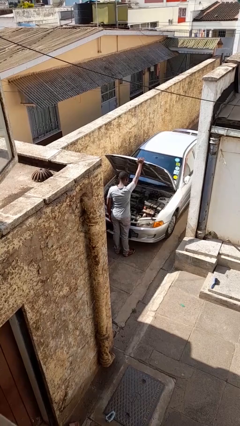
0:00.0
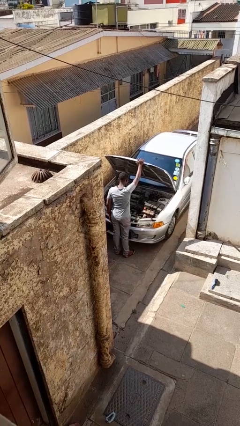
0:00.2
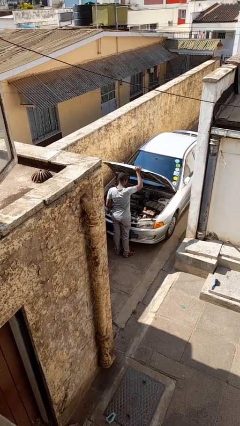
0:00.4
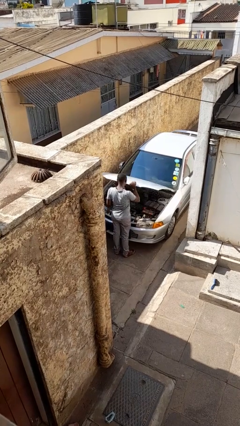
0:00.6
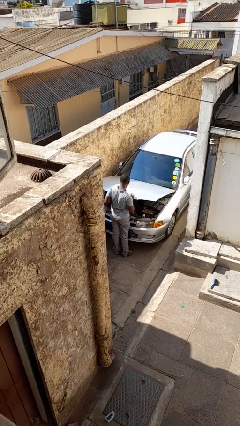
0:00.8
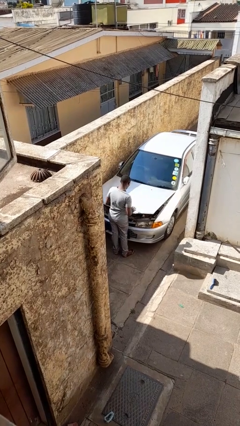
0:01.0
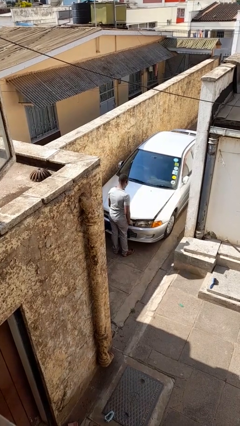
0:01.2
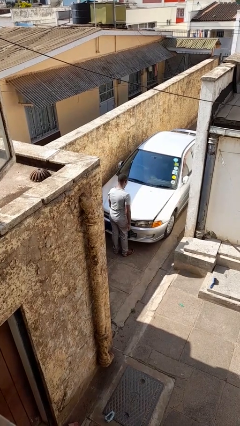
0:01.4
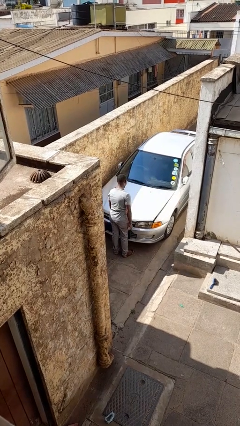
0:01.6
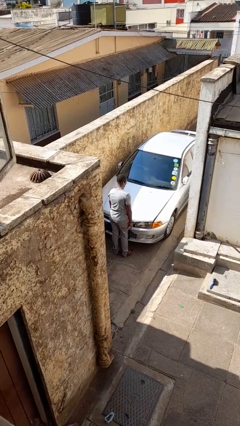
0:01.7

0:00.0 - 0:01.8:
person closes car hood

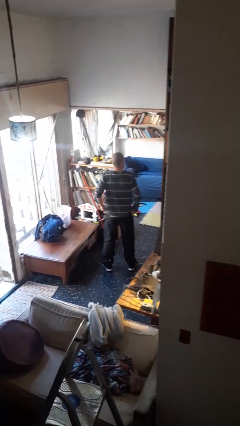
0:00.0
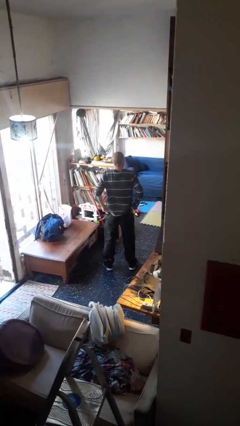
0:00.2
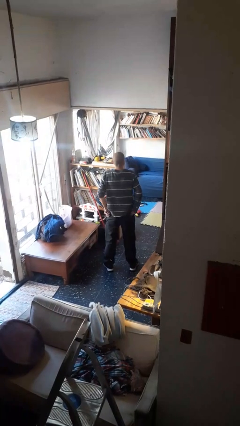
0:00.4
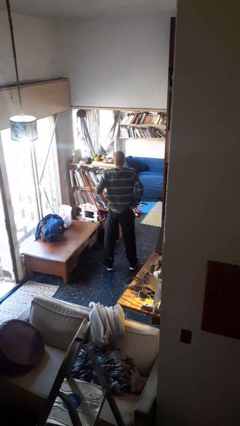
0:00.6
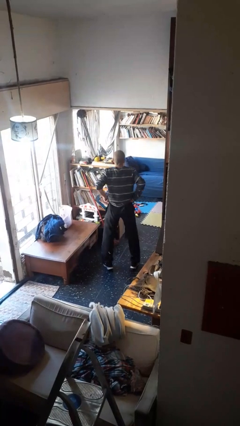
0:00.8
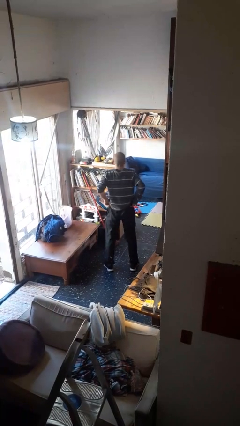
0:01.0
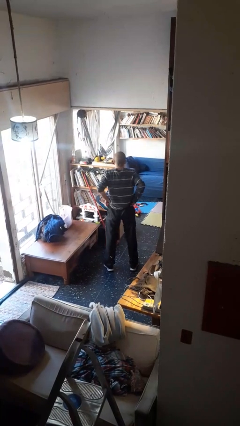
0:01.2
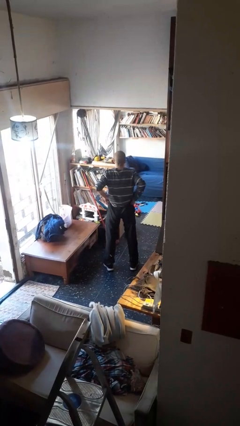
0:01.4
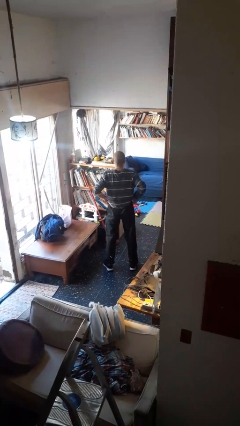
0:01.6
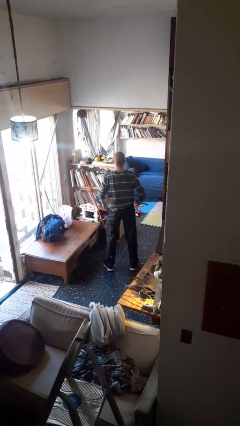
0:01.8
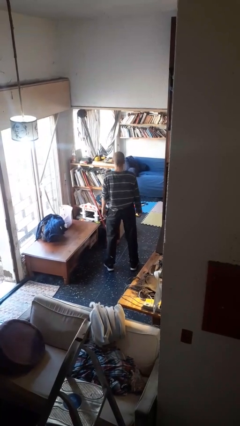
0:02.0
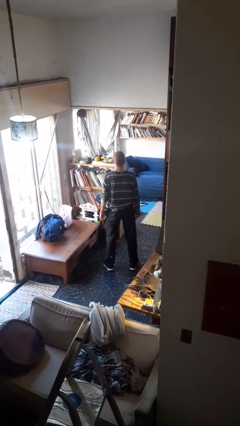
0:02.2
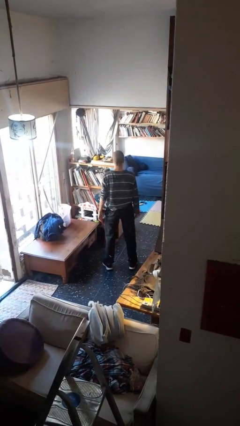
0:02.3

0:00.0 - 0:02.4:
person hikes up pants

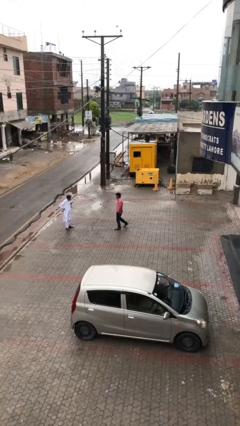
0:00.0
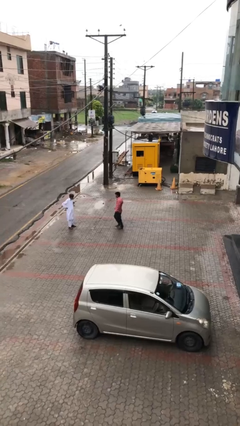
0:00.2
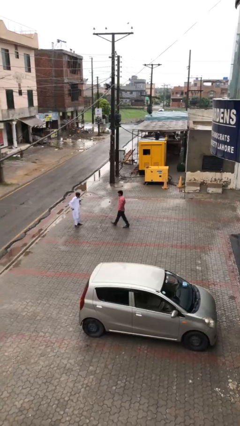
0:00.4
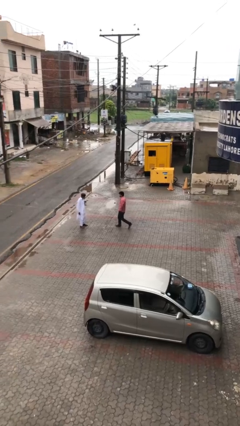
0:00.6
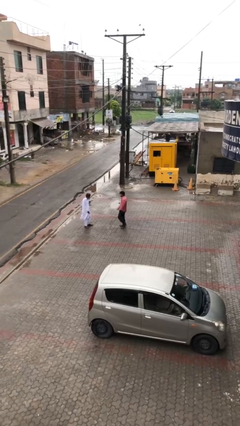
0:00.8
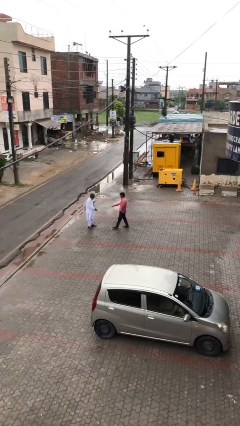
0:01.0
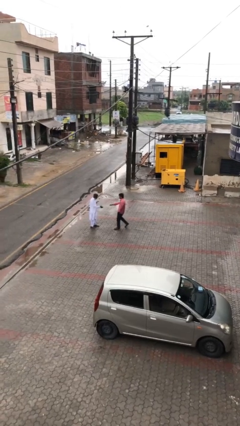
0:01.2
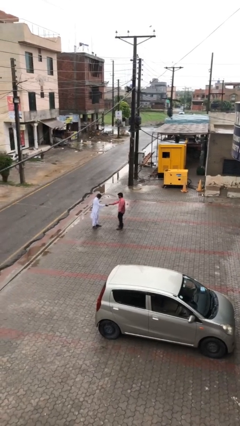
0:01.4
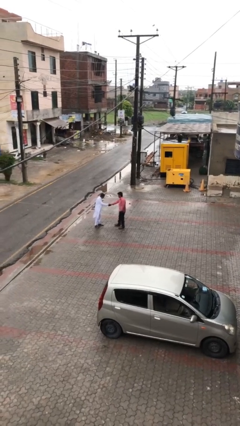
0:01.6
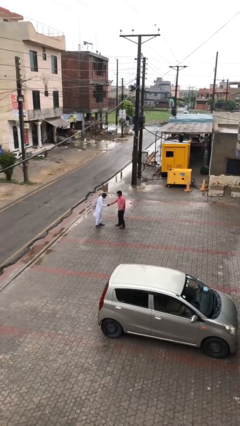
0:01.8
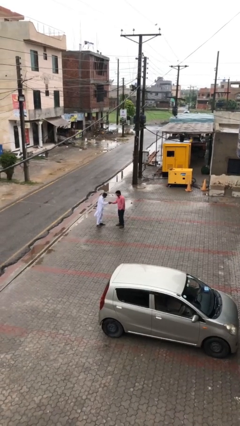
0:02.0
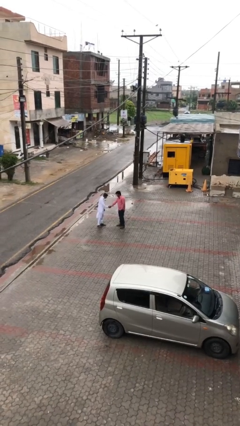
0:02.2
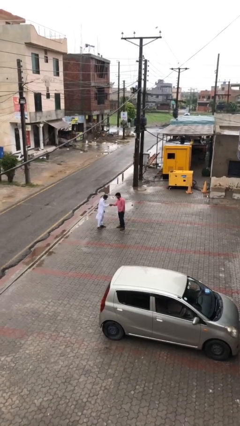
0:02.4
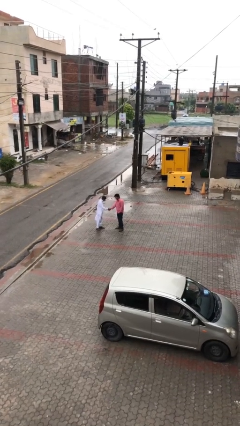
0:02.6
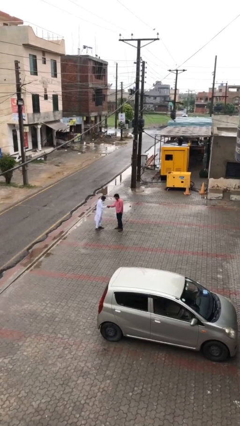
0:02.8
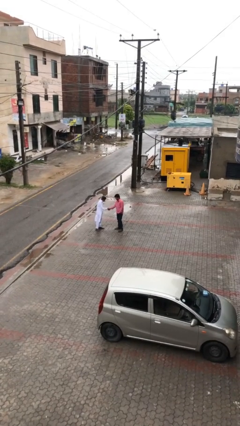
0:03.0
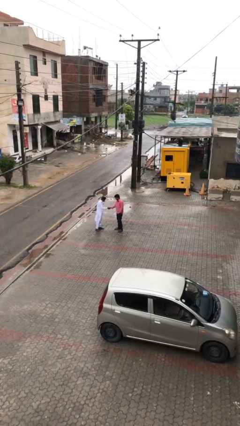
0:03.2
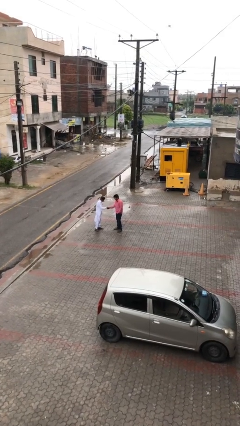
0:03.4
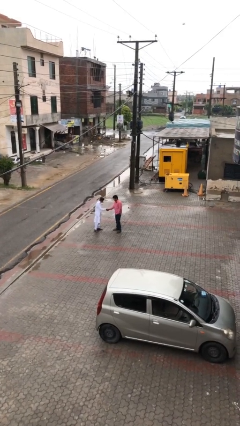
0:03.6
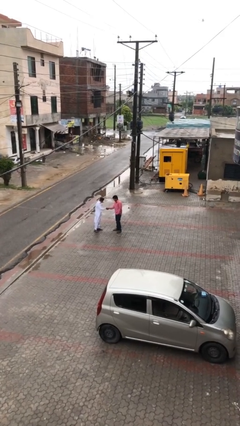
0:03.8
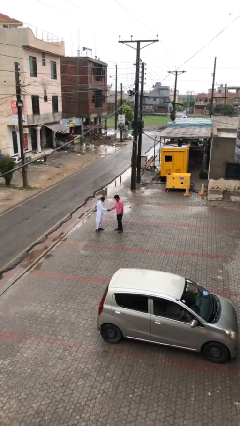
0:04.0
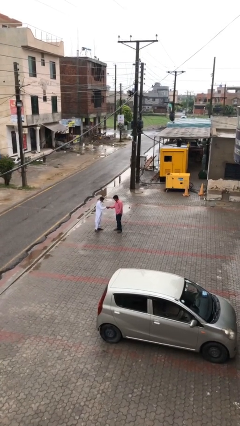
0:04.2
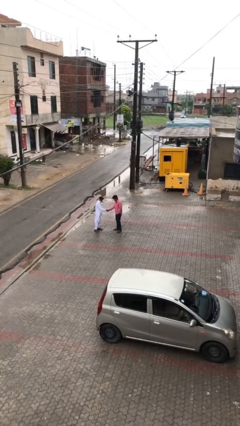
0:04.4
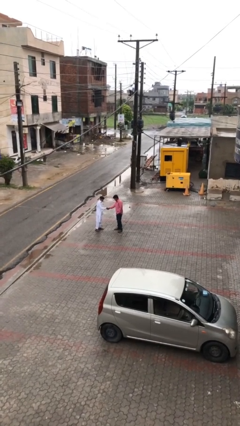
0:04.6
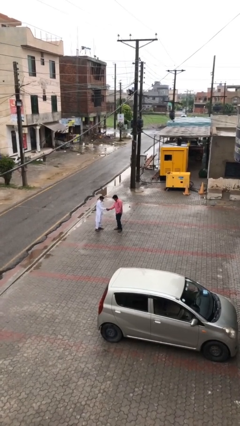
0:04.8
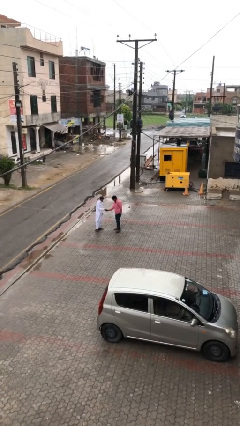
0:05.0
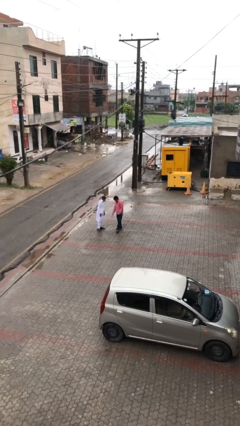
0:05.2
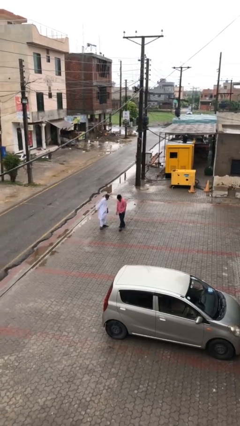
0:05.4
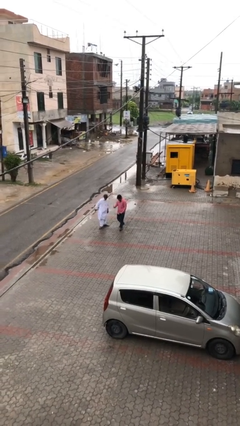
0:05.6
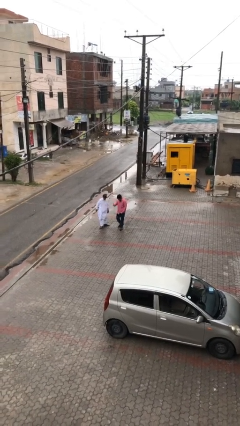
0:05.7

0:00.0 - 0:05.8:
person shakes hand

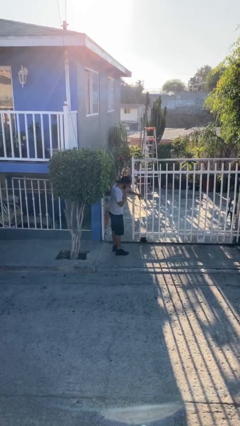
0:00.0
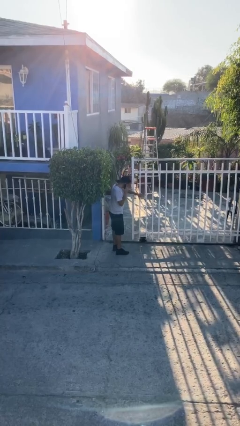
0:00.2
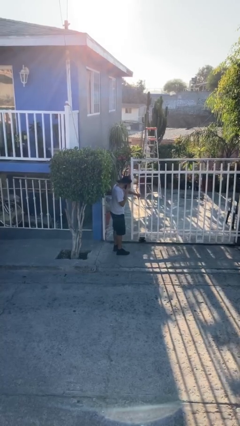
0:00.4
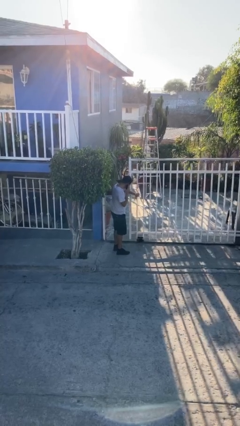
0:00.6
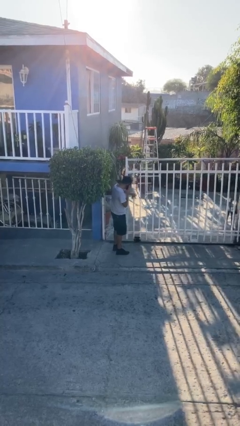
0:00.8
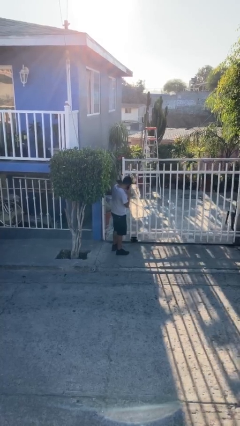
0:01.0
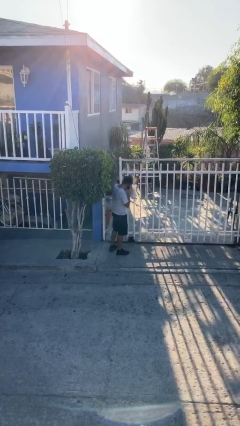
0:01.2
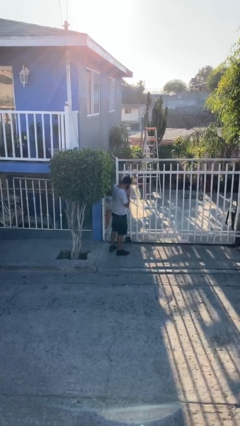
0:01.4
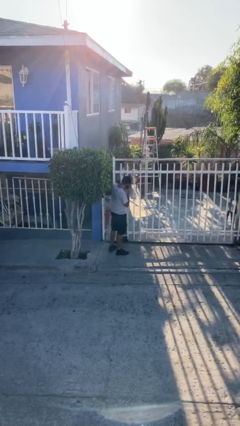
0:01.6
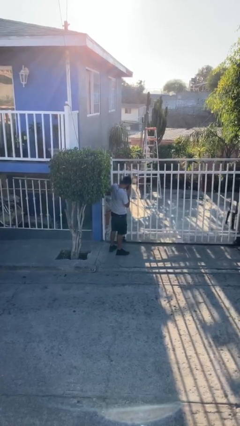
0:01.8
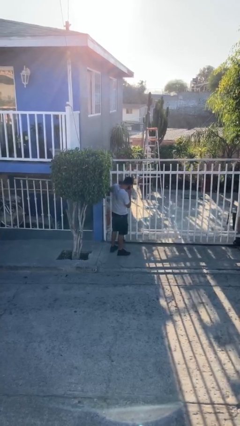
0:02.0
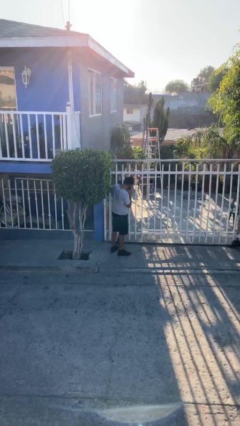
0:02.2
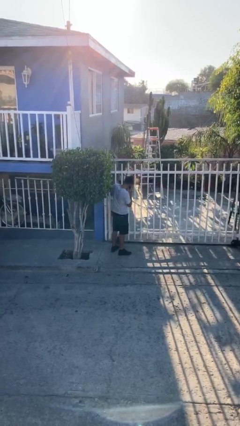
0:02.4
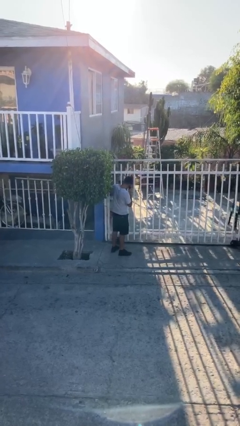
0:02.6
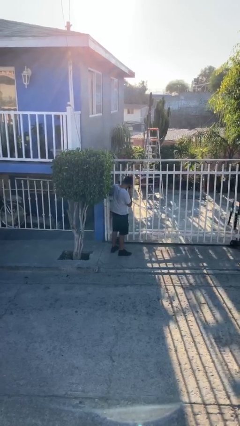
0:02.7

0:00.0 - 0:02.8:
person closes facility door

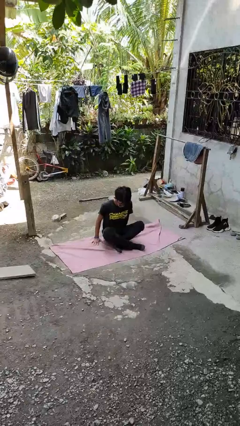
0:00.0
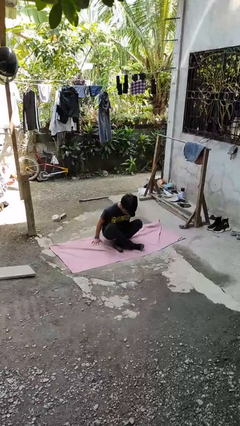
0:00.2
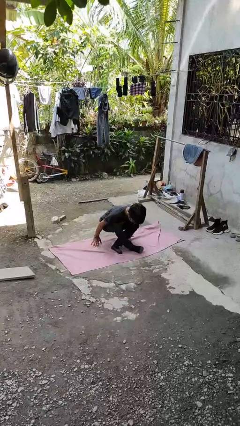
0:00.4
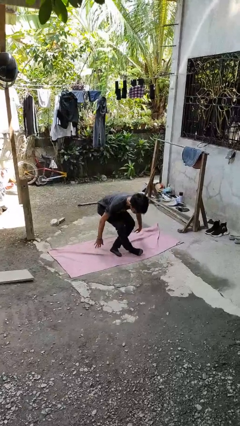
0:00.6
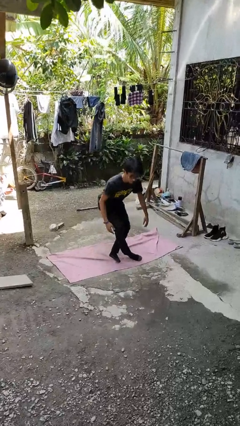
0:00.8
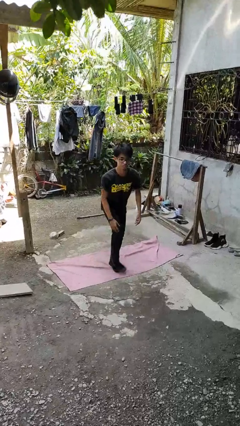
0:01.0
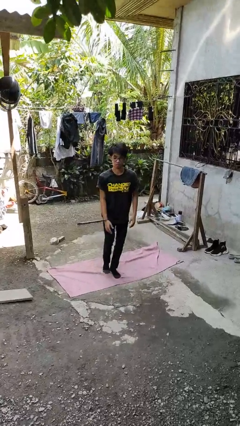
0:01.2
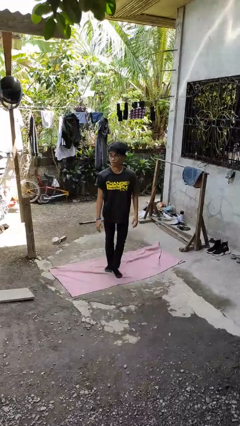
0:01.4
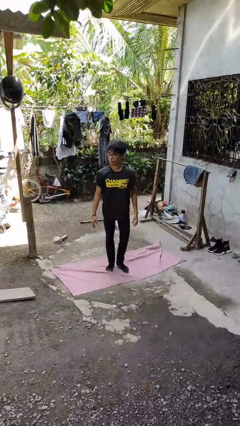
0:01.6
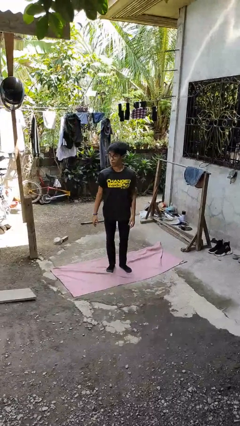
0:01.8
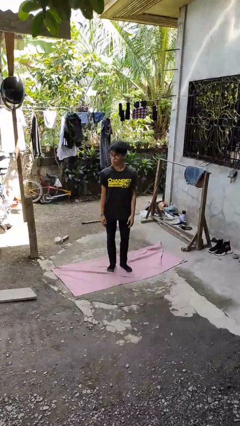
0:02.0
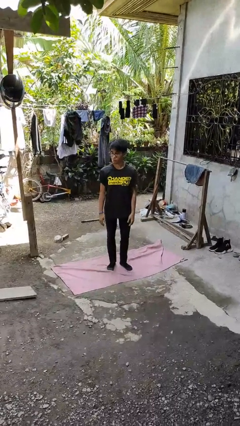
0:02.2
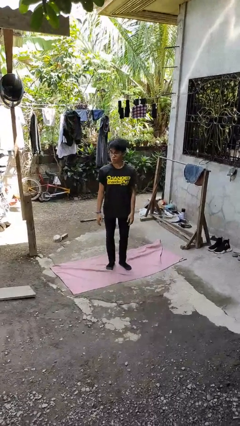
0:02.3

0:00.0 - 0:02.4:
person stands up from floor

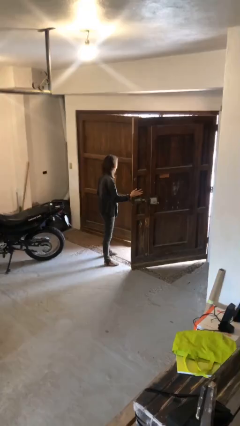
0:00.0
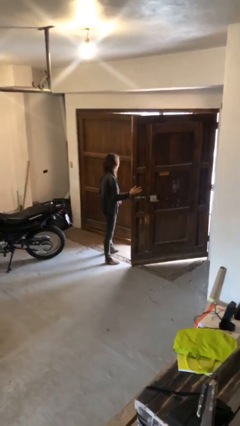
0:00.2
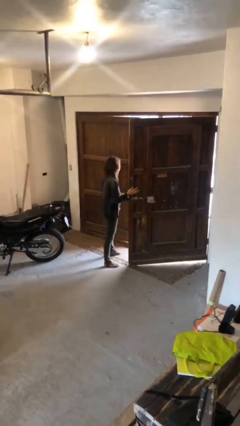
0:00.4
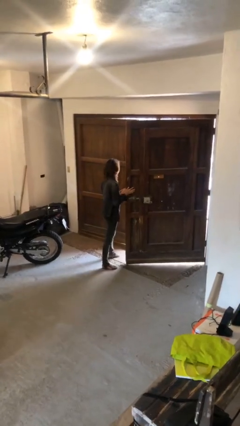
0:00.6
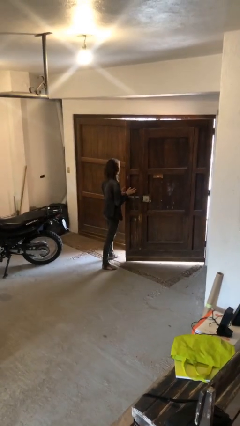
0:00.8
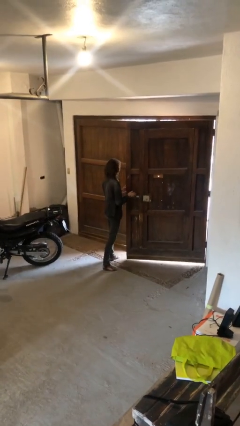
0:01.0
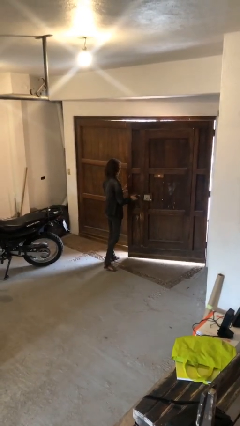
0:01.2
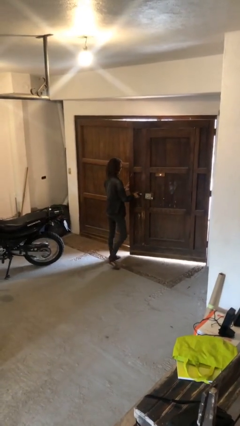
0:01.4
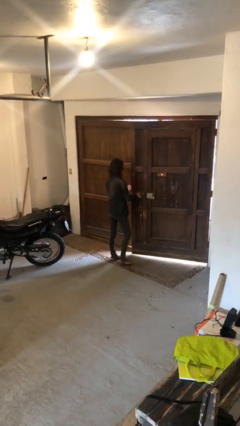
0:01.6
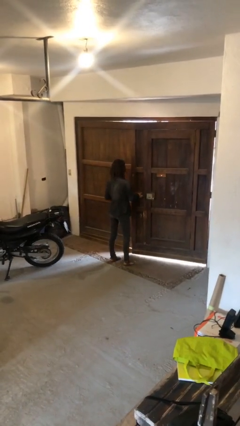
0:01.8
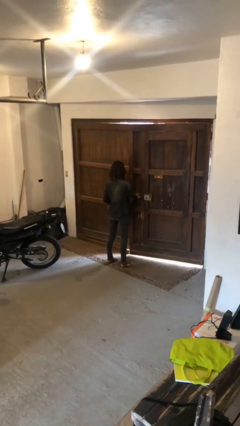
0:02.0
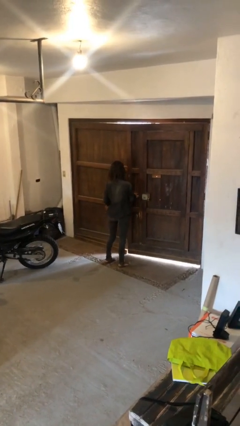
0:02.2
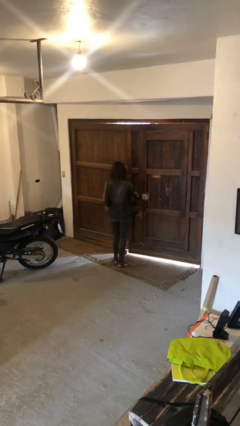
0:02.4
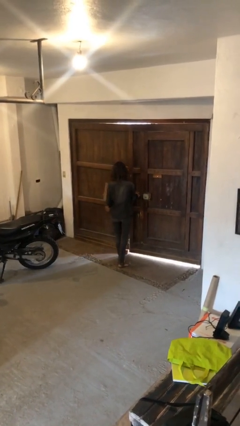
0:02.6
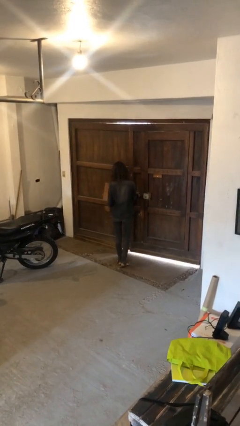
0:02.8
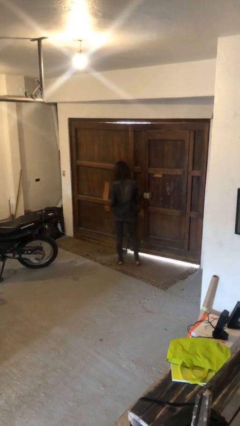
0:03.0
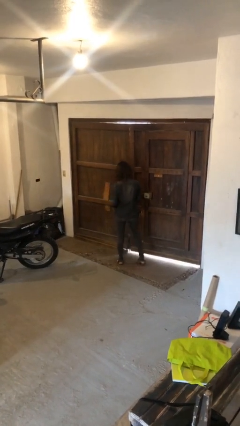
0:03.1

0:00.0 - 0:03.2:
person closes gate
